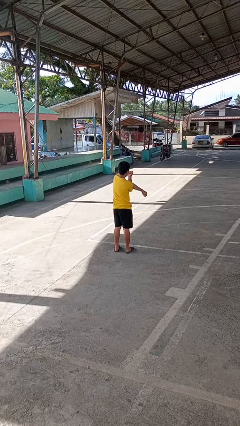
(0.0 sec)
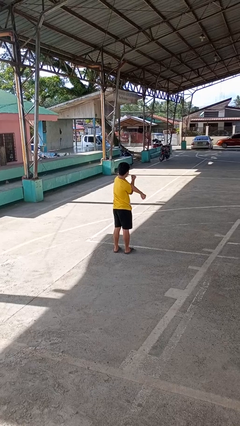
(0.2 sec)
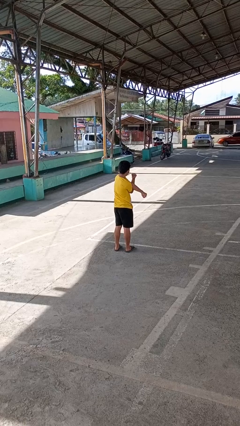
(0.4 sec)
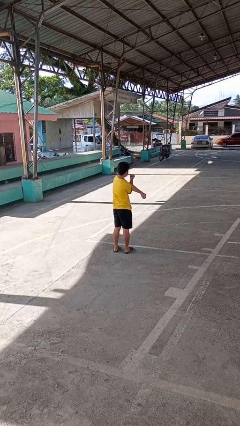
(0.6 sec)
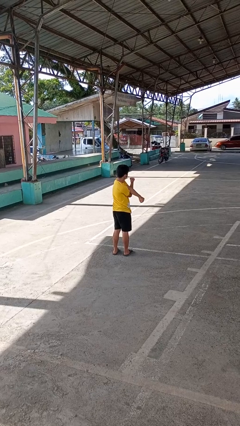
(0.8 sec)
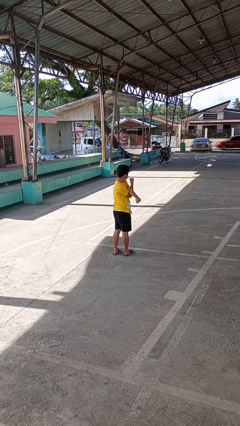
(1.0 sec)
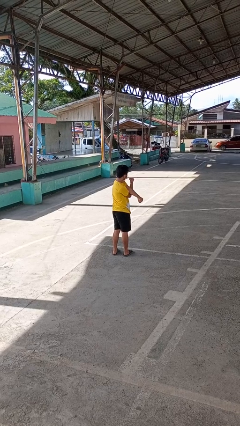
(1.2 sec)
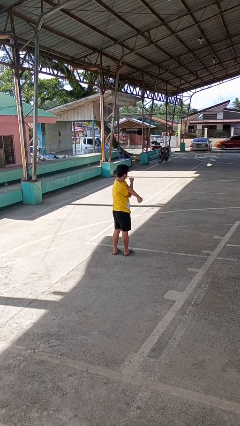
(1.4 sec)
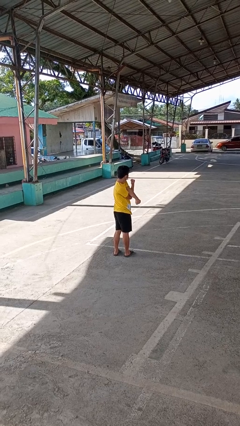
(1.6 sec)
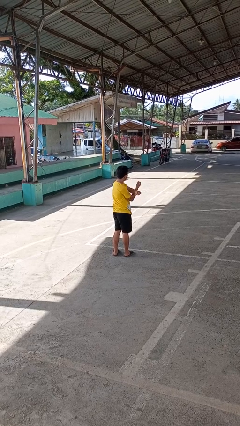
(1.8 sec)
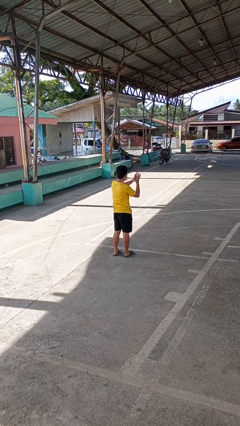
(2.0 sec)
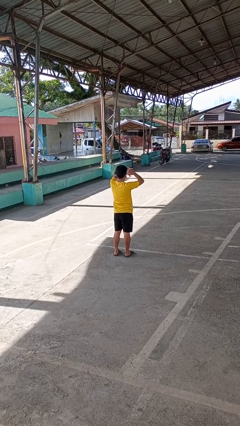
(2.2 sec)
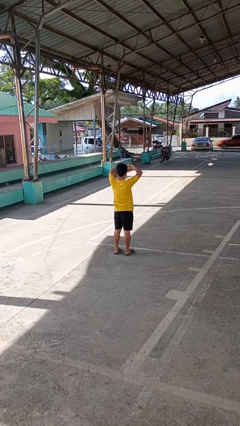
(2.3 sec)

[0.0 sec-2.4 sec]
person stretches arms to side

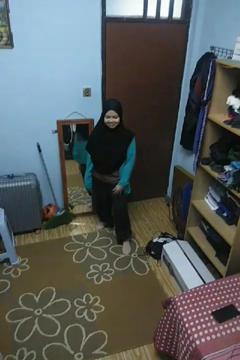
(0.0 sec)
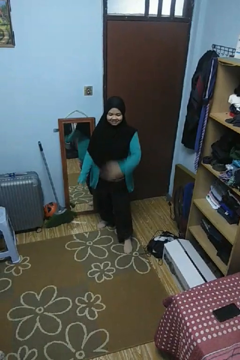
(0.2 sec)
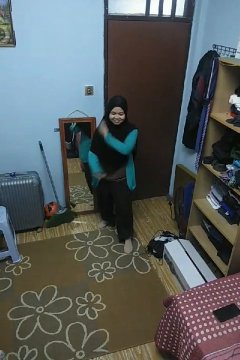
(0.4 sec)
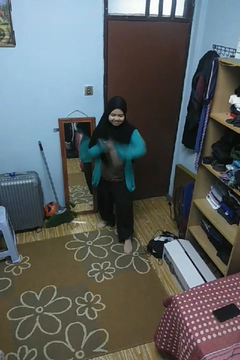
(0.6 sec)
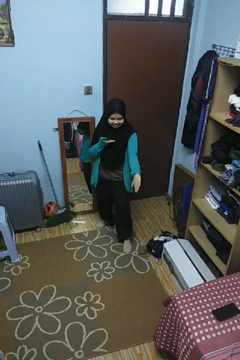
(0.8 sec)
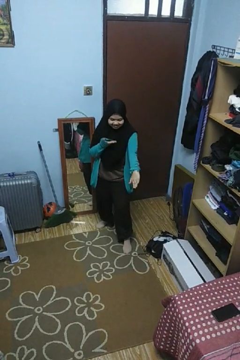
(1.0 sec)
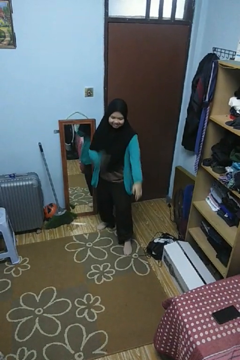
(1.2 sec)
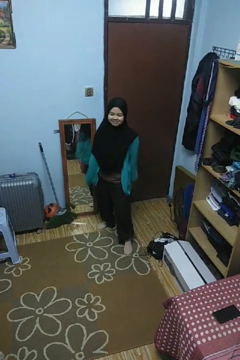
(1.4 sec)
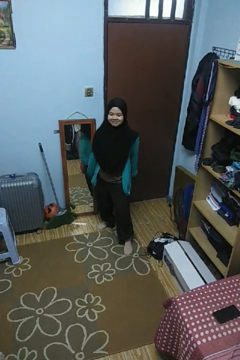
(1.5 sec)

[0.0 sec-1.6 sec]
person karate chop

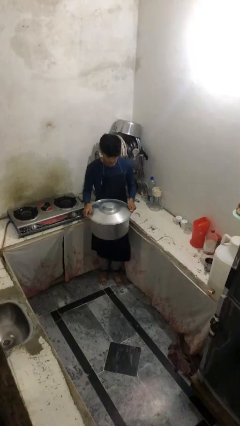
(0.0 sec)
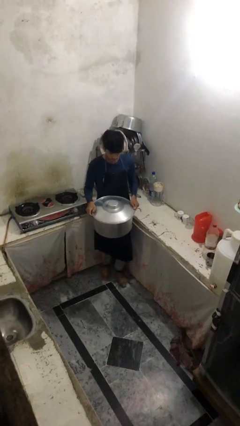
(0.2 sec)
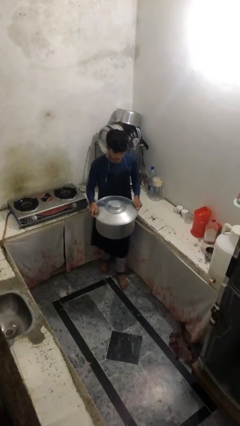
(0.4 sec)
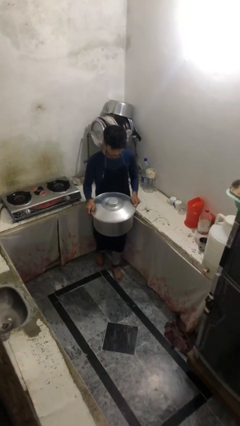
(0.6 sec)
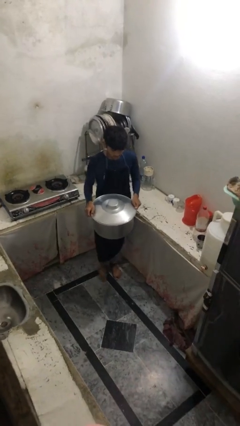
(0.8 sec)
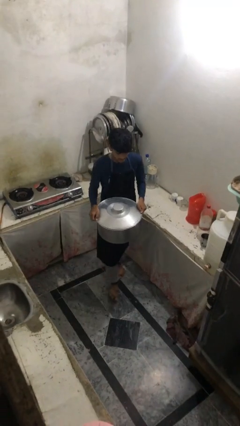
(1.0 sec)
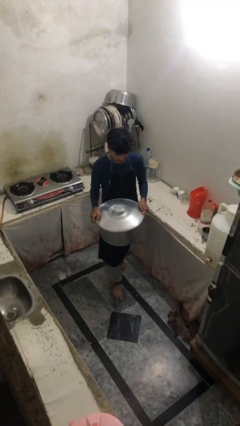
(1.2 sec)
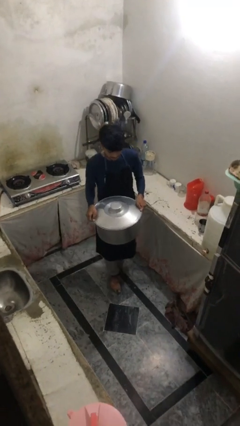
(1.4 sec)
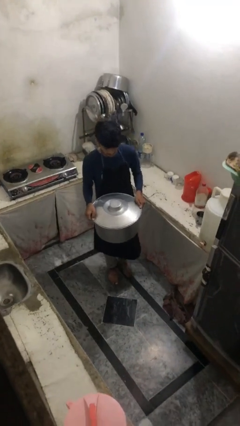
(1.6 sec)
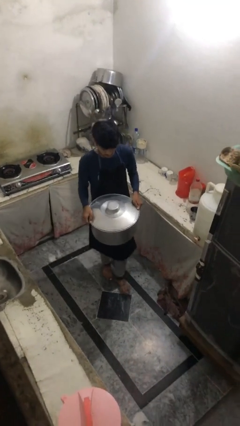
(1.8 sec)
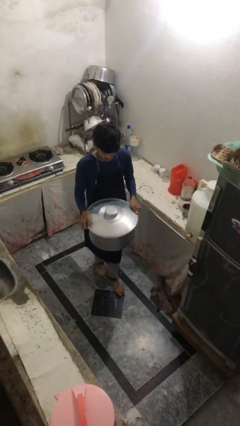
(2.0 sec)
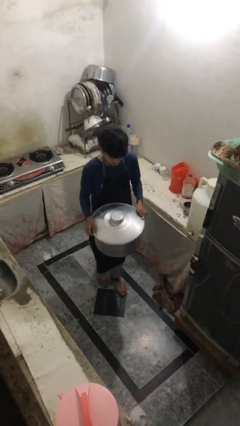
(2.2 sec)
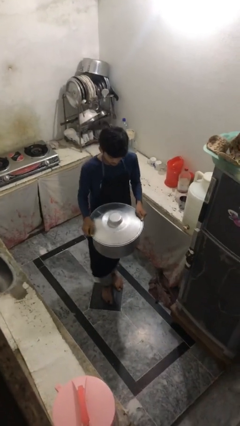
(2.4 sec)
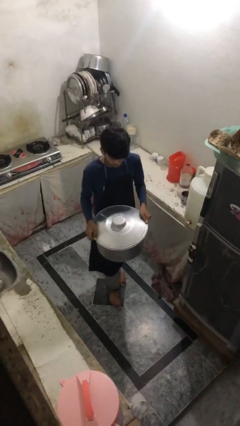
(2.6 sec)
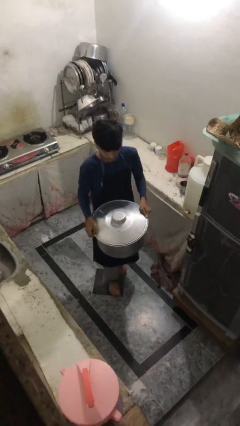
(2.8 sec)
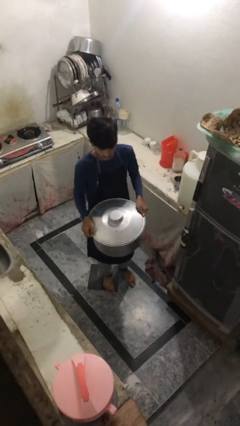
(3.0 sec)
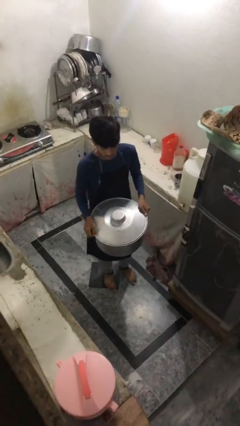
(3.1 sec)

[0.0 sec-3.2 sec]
person carries heavy object

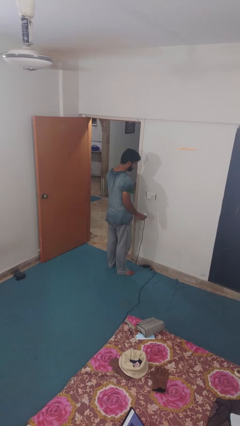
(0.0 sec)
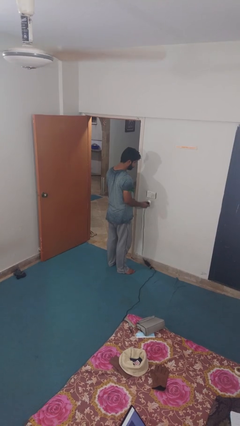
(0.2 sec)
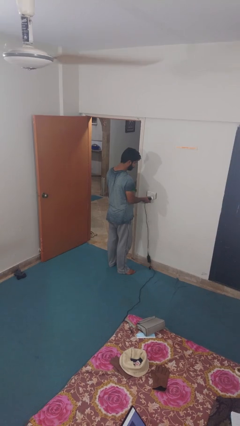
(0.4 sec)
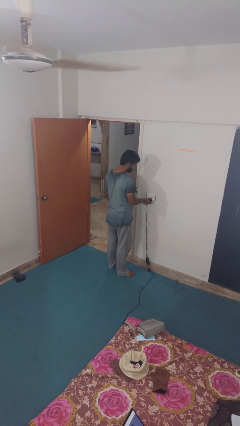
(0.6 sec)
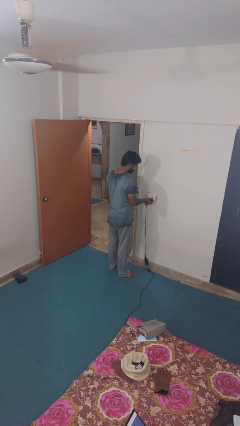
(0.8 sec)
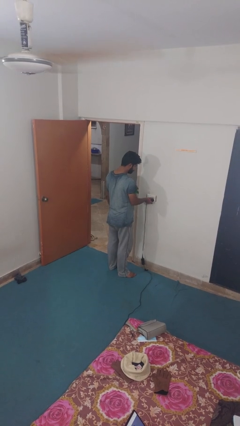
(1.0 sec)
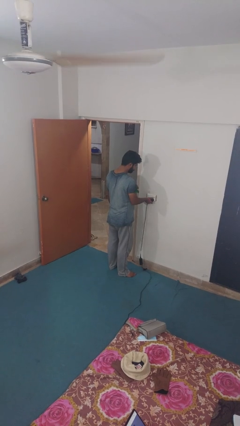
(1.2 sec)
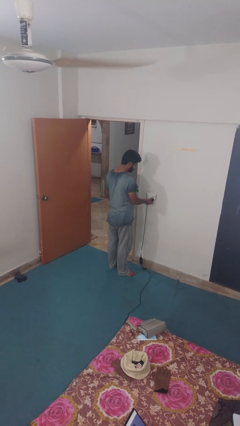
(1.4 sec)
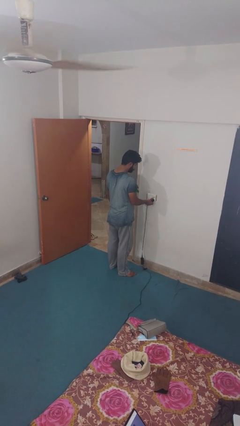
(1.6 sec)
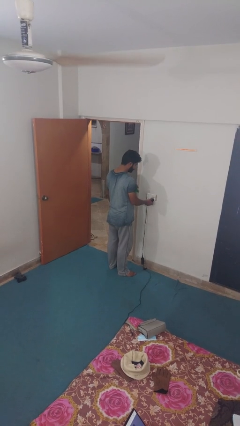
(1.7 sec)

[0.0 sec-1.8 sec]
person plugs into electrical socket

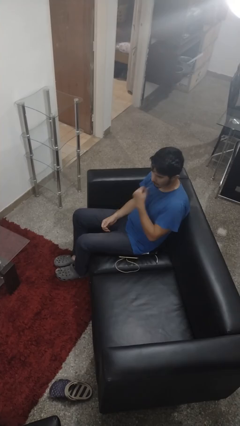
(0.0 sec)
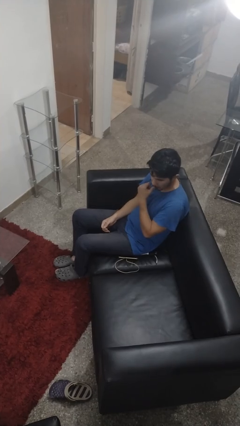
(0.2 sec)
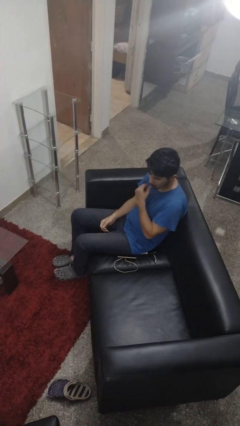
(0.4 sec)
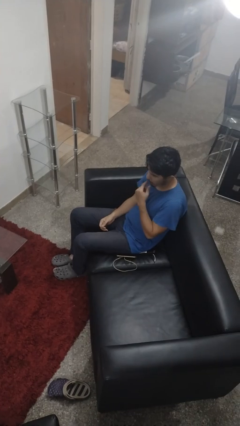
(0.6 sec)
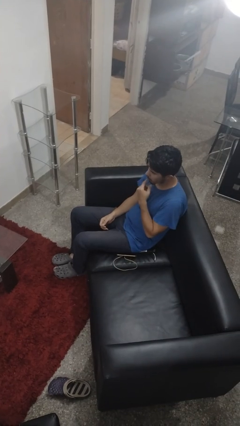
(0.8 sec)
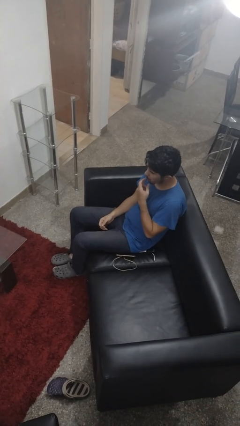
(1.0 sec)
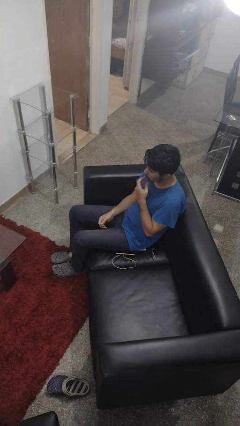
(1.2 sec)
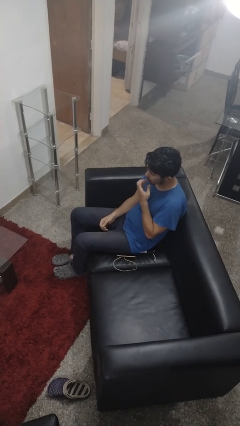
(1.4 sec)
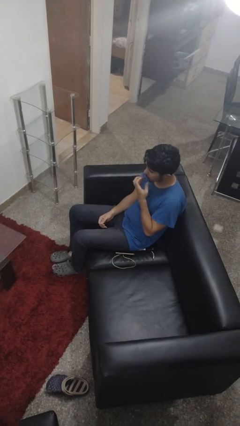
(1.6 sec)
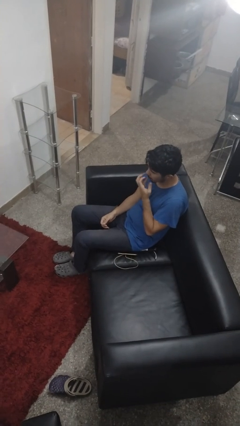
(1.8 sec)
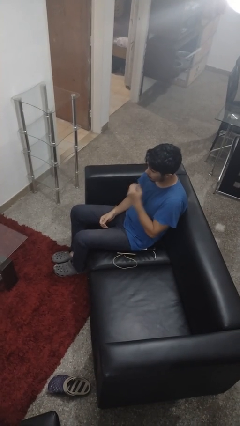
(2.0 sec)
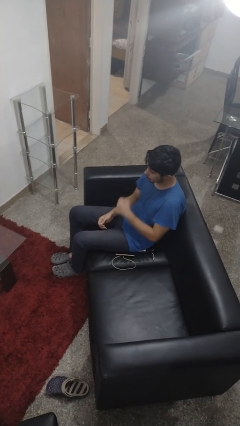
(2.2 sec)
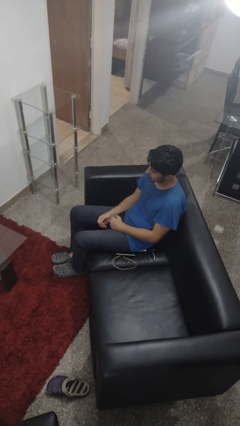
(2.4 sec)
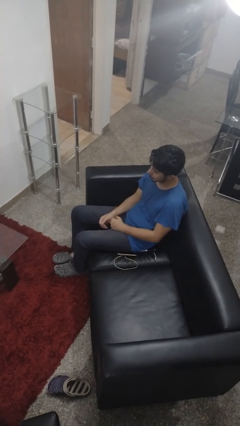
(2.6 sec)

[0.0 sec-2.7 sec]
person licks fingers

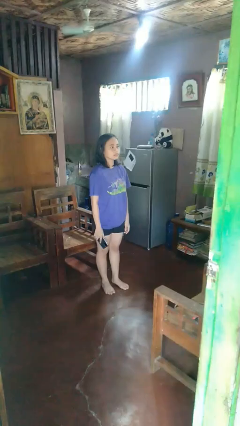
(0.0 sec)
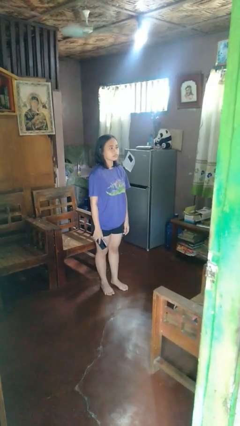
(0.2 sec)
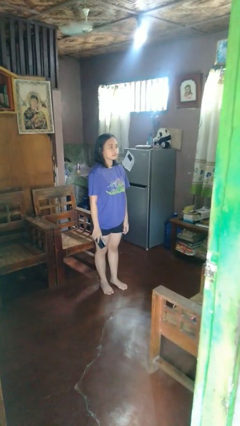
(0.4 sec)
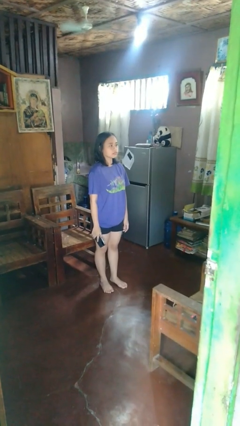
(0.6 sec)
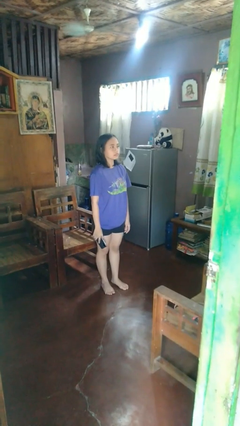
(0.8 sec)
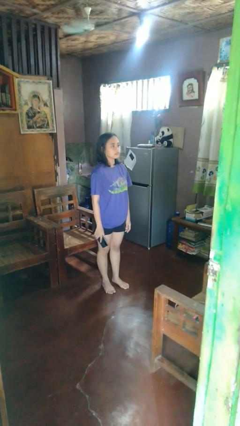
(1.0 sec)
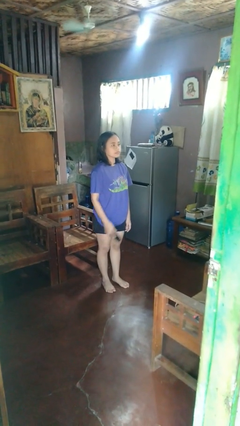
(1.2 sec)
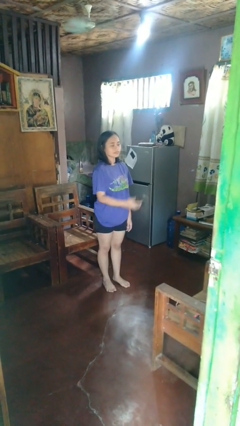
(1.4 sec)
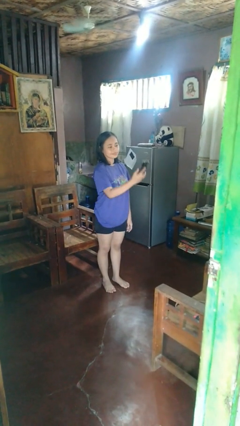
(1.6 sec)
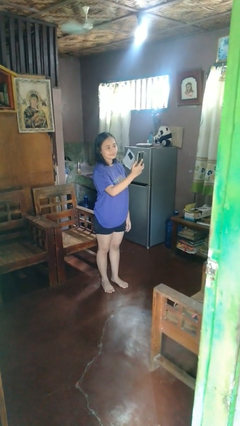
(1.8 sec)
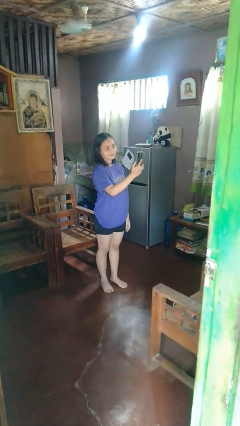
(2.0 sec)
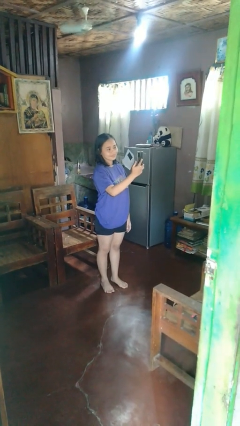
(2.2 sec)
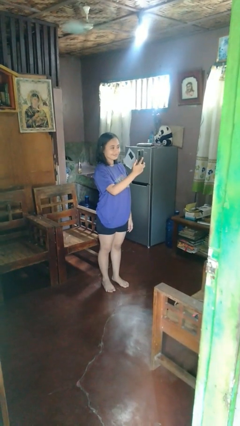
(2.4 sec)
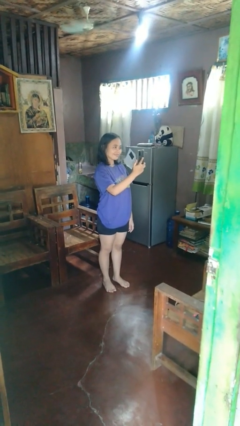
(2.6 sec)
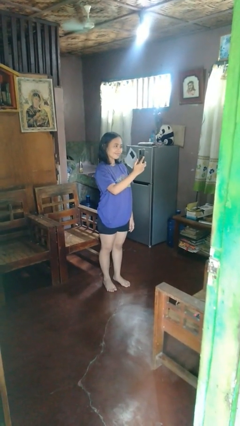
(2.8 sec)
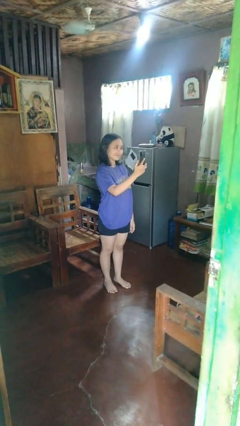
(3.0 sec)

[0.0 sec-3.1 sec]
person takes selfie

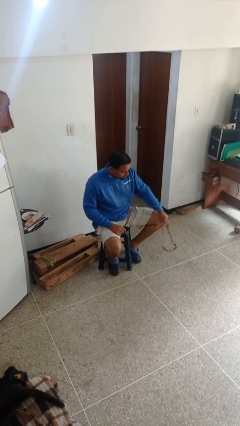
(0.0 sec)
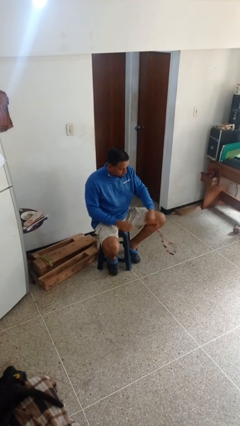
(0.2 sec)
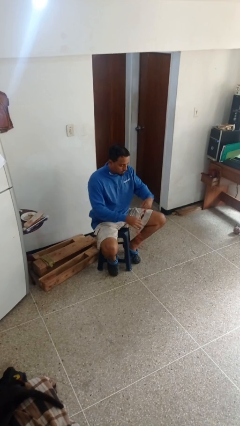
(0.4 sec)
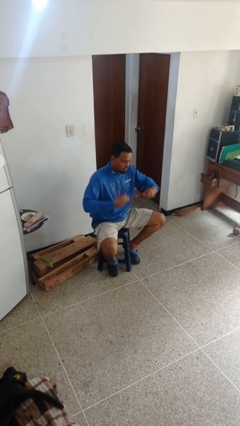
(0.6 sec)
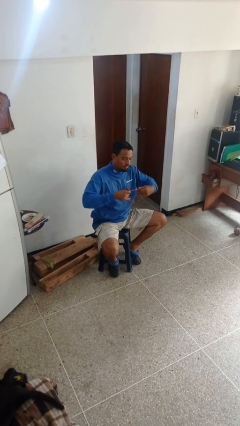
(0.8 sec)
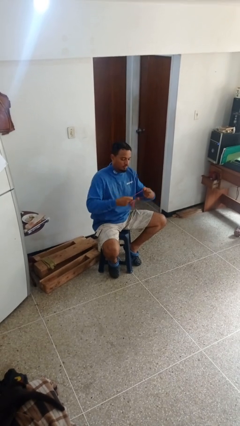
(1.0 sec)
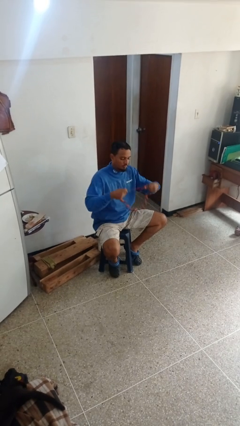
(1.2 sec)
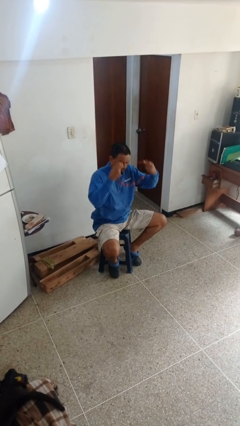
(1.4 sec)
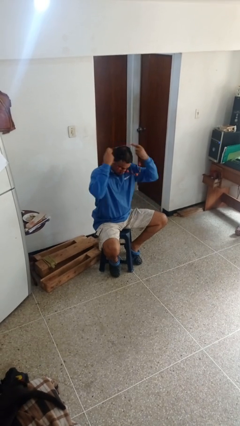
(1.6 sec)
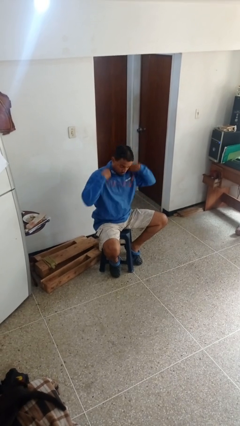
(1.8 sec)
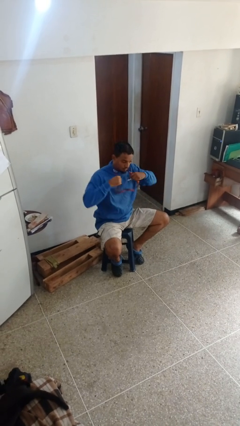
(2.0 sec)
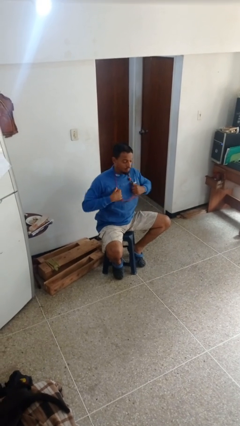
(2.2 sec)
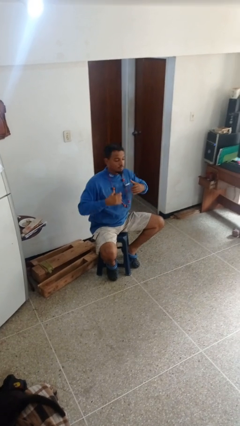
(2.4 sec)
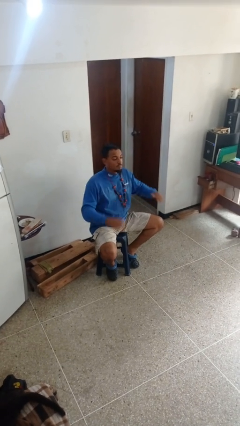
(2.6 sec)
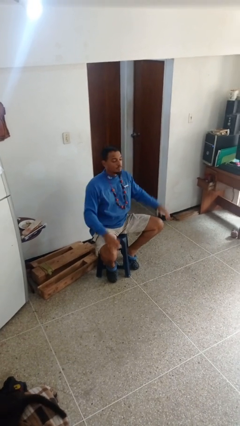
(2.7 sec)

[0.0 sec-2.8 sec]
person puts on necklace
